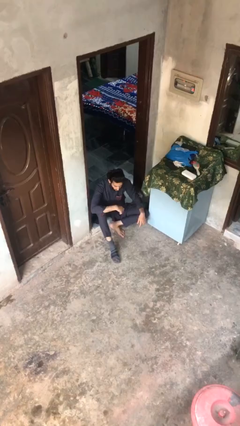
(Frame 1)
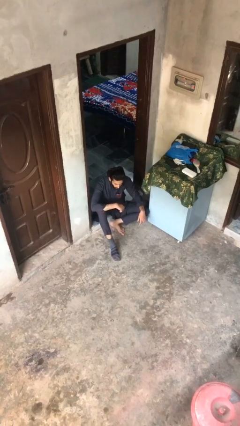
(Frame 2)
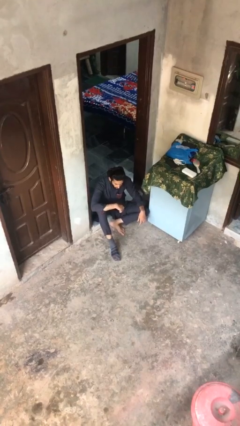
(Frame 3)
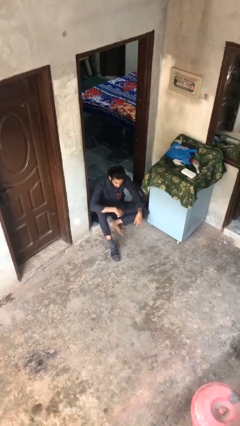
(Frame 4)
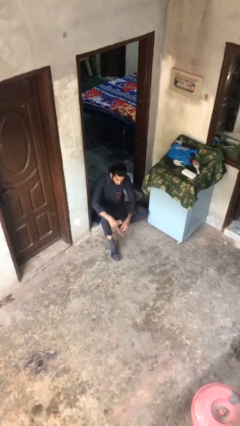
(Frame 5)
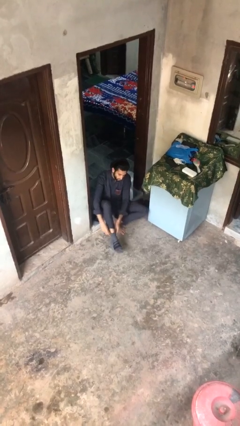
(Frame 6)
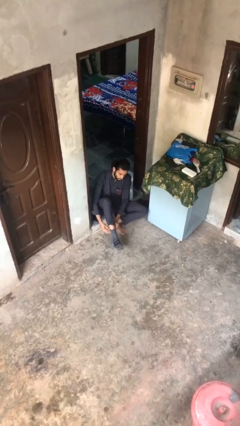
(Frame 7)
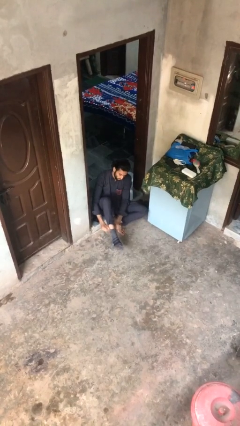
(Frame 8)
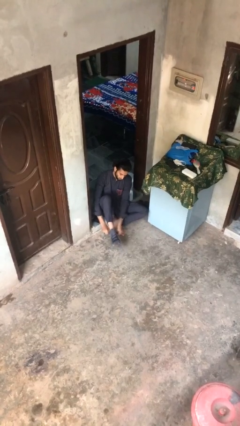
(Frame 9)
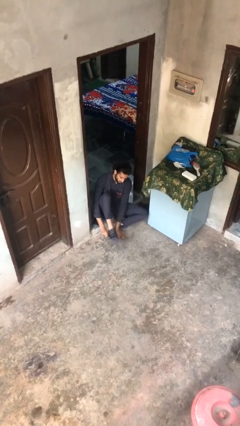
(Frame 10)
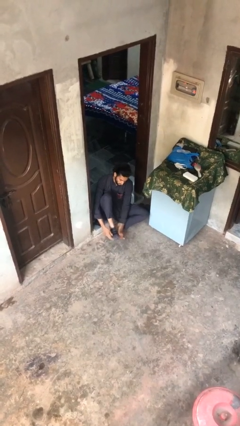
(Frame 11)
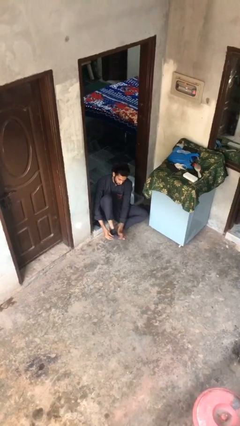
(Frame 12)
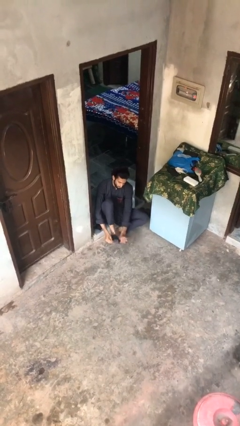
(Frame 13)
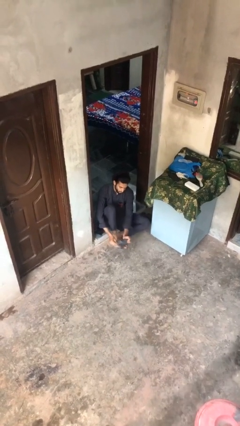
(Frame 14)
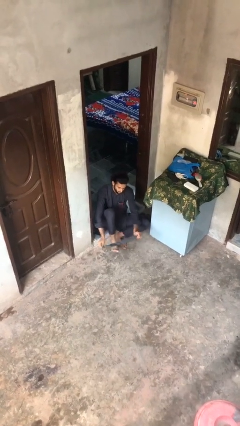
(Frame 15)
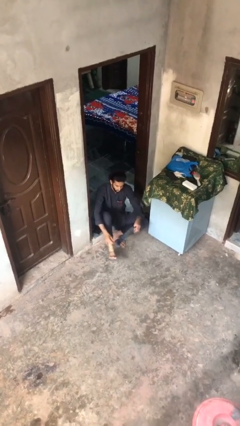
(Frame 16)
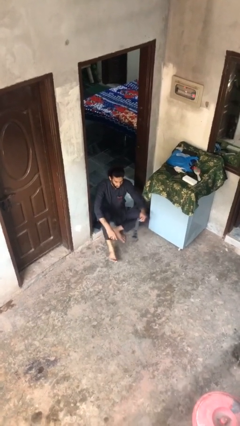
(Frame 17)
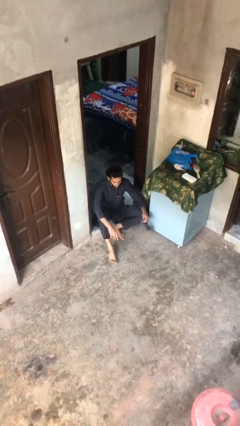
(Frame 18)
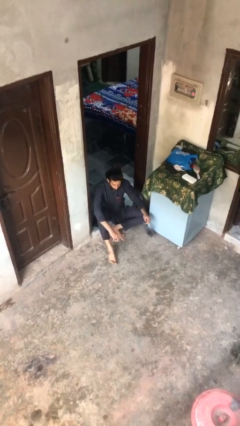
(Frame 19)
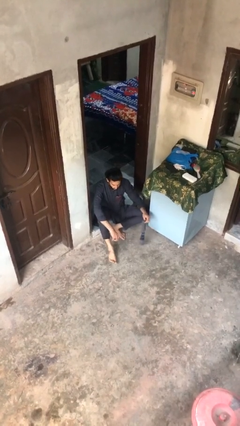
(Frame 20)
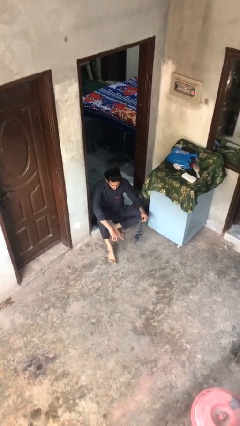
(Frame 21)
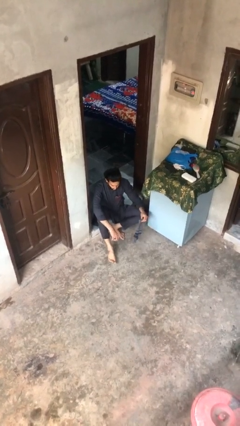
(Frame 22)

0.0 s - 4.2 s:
person takes off socks

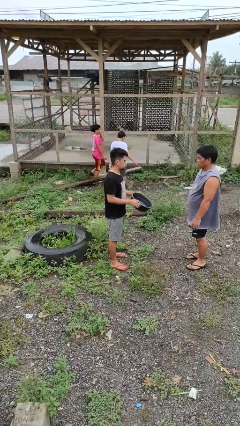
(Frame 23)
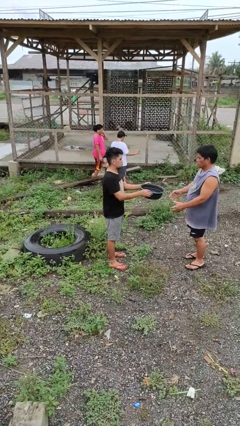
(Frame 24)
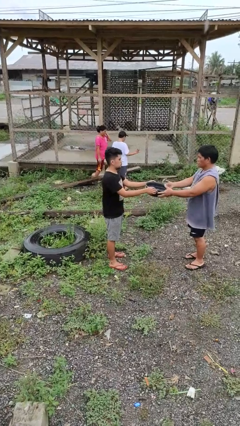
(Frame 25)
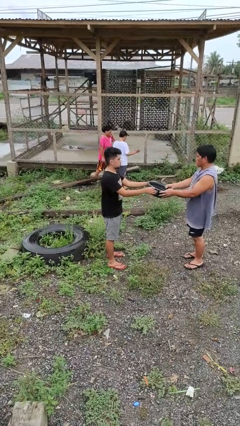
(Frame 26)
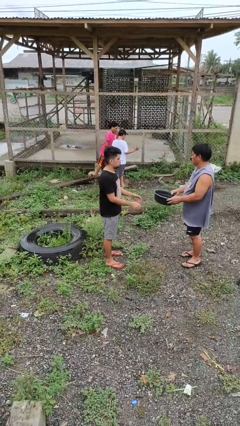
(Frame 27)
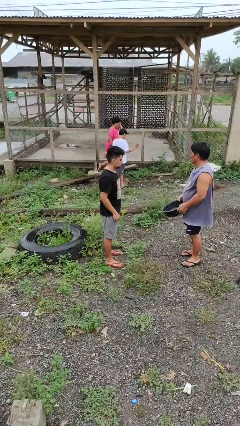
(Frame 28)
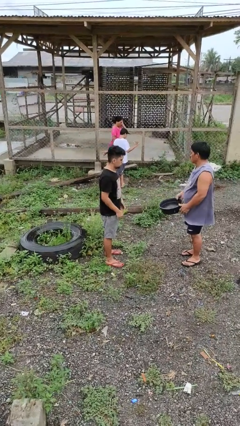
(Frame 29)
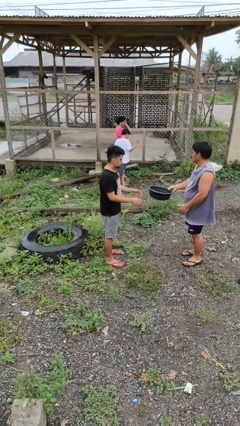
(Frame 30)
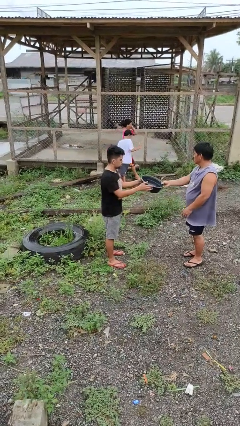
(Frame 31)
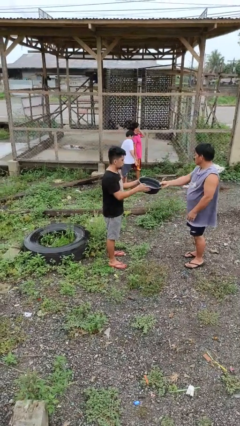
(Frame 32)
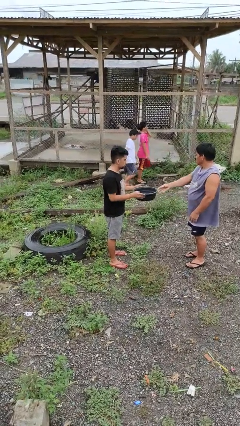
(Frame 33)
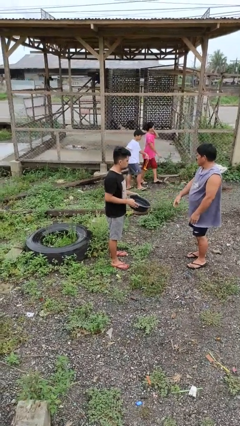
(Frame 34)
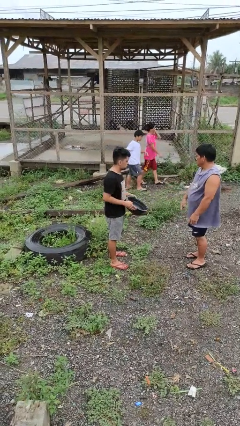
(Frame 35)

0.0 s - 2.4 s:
person transfers object to person

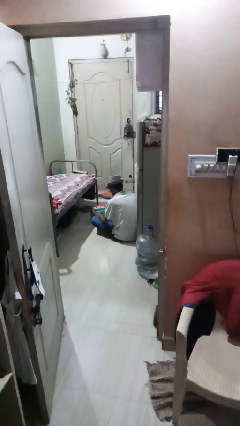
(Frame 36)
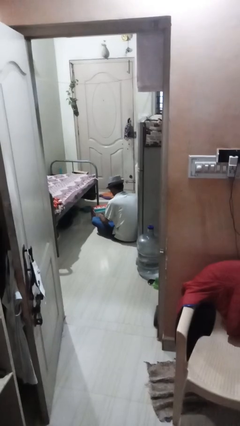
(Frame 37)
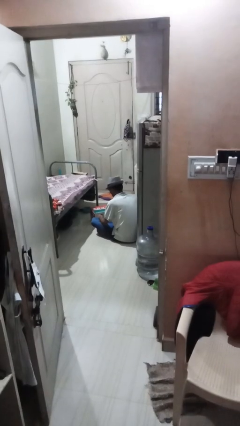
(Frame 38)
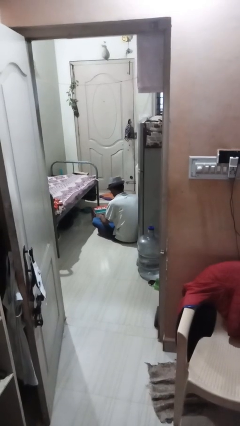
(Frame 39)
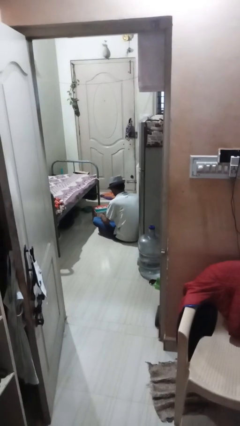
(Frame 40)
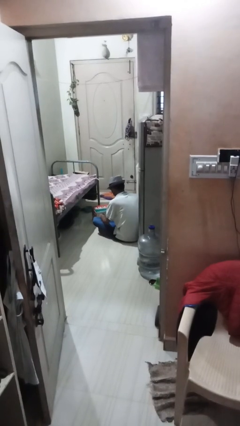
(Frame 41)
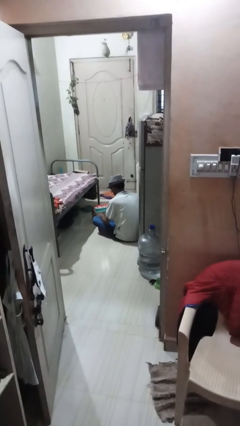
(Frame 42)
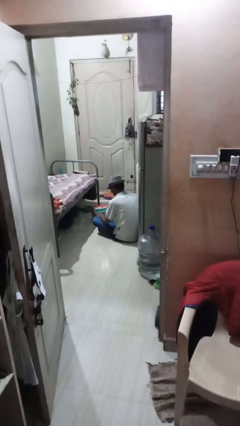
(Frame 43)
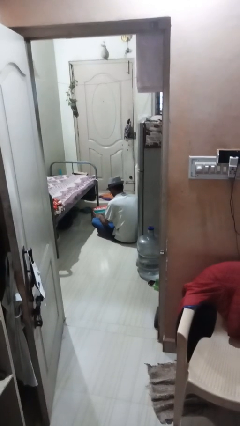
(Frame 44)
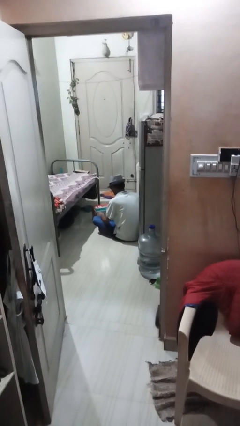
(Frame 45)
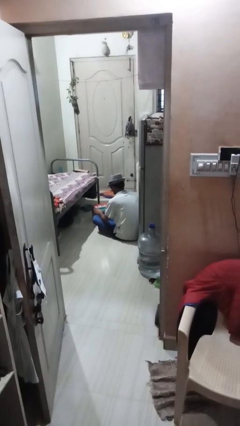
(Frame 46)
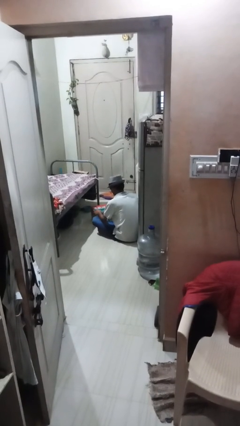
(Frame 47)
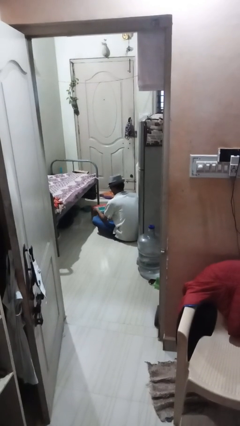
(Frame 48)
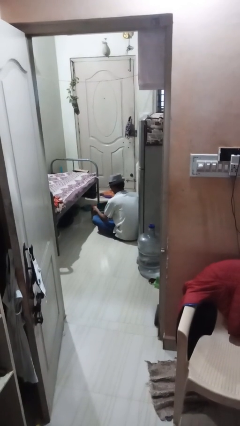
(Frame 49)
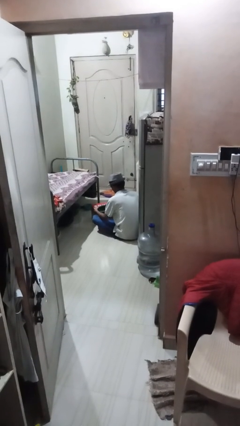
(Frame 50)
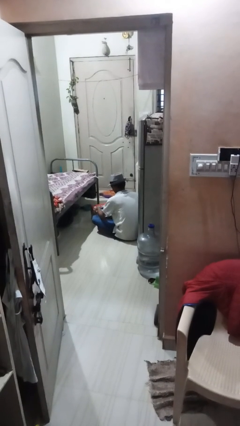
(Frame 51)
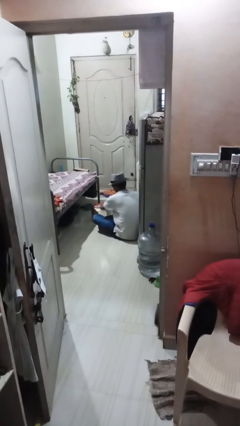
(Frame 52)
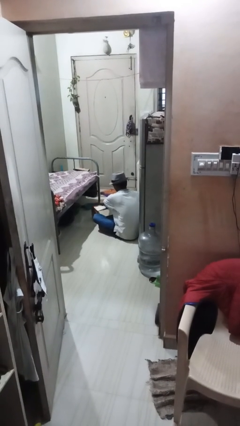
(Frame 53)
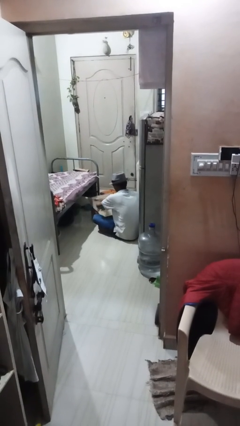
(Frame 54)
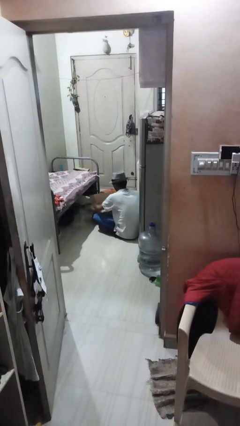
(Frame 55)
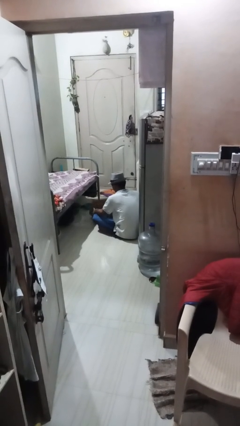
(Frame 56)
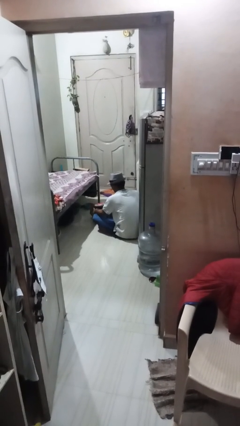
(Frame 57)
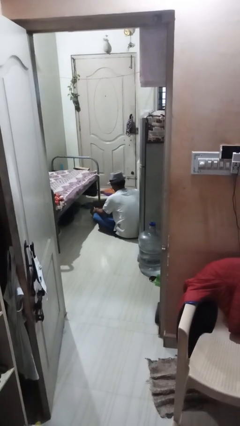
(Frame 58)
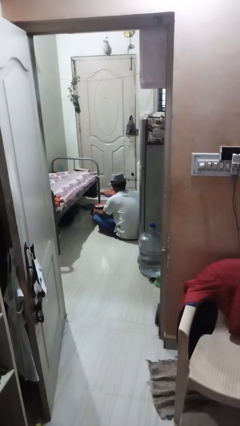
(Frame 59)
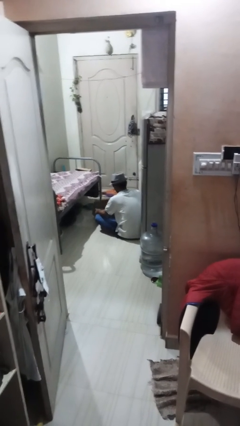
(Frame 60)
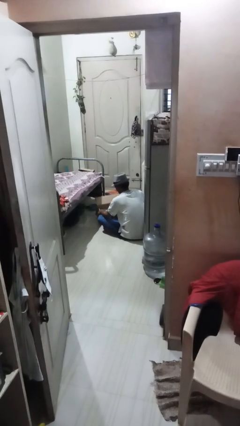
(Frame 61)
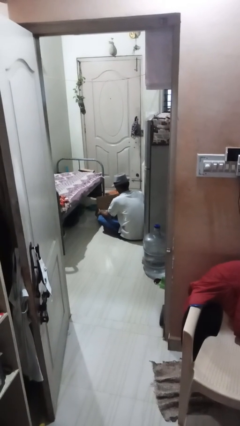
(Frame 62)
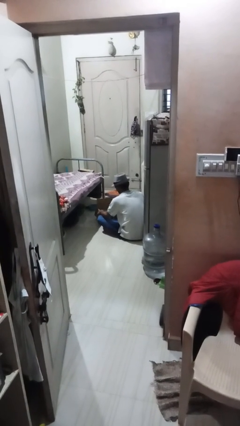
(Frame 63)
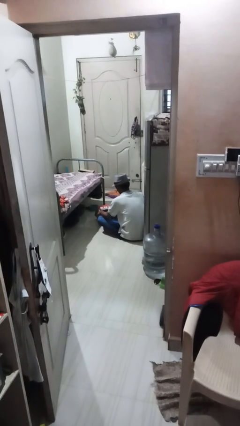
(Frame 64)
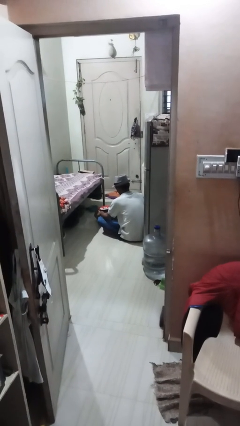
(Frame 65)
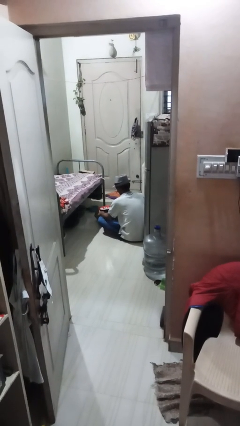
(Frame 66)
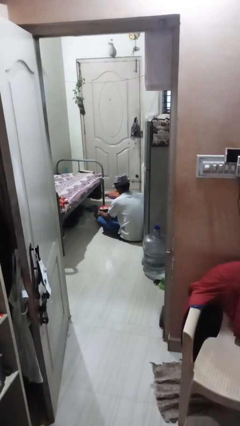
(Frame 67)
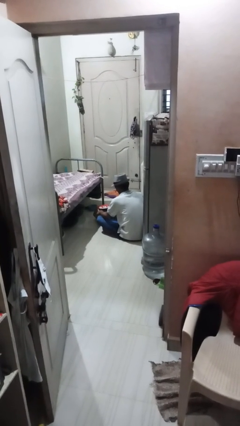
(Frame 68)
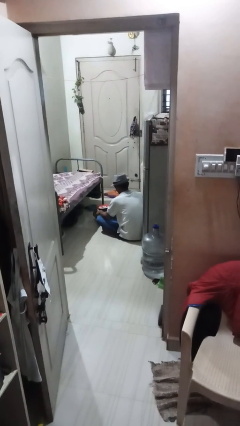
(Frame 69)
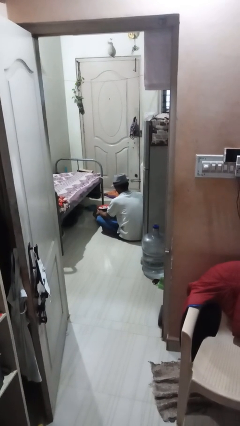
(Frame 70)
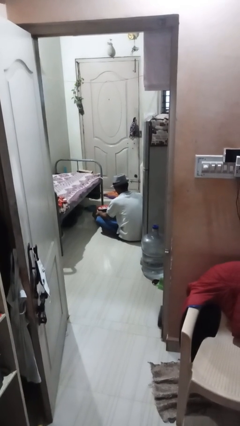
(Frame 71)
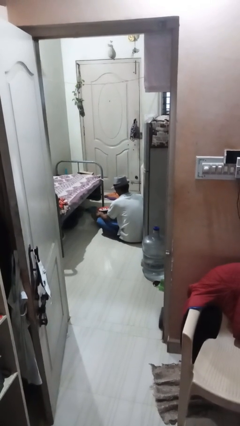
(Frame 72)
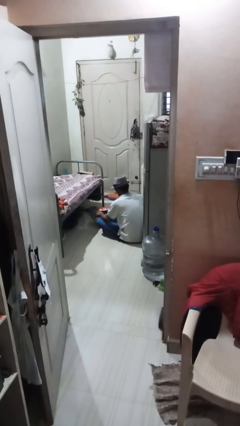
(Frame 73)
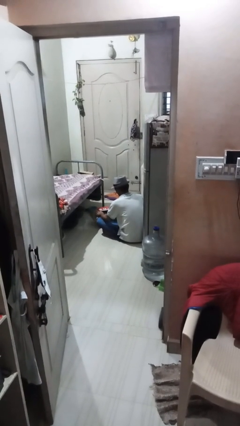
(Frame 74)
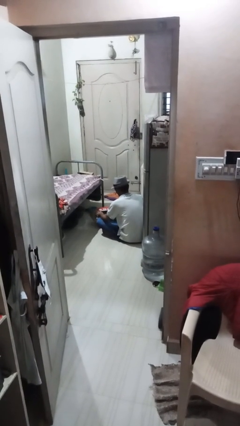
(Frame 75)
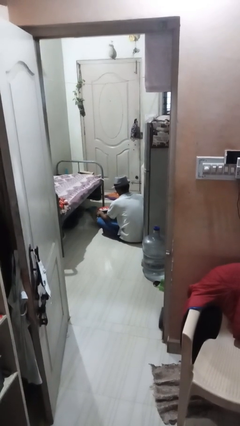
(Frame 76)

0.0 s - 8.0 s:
person opens box

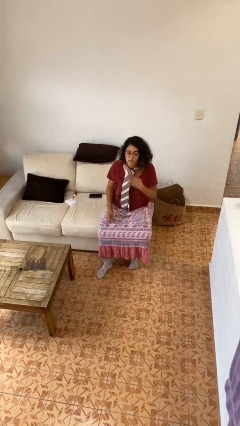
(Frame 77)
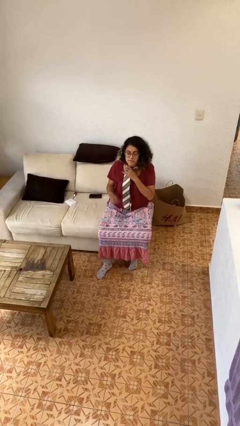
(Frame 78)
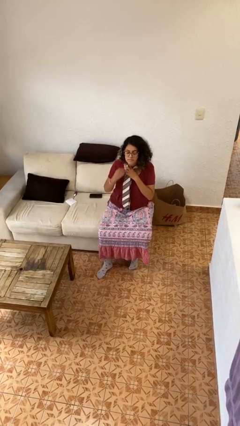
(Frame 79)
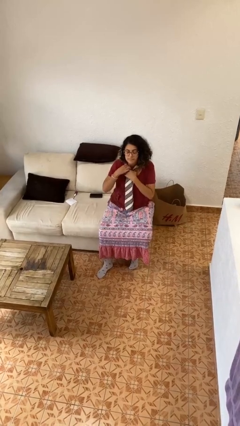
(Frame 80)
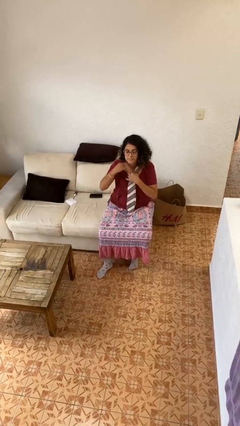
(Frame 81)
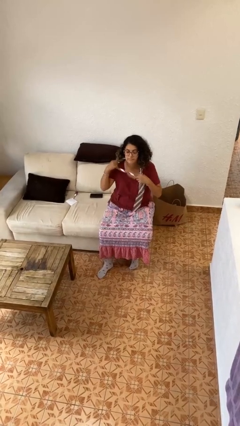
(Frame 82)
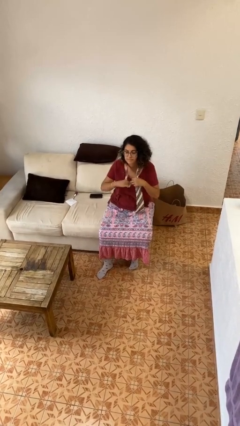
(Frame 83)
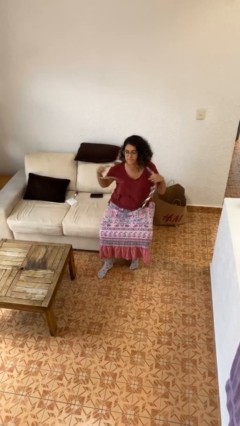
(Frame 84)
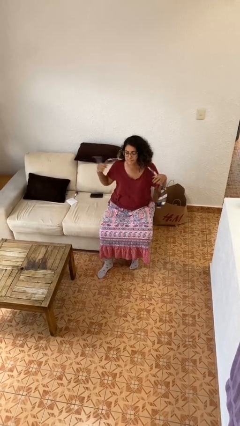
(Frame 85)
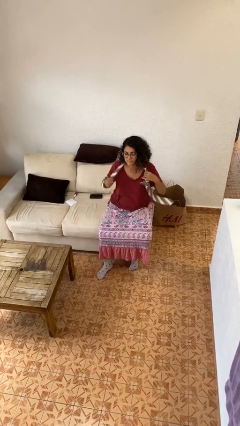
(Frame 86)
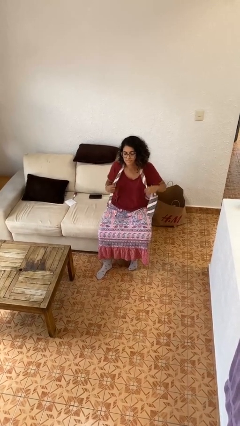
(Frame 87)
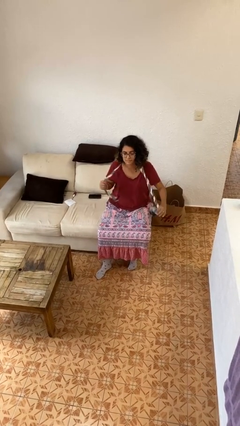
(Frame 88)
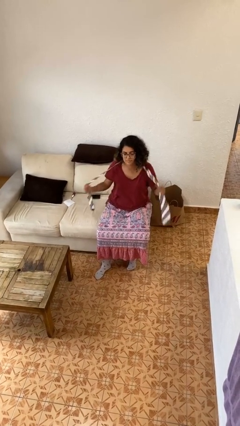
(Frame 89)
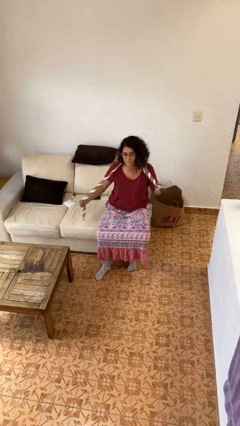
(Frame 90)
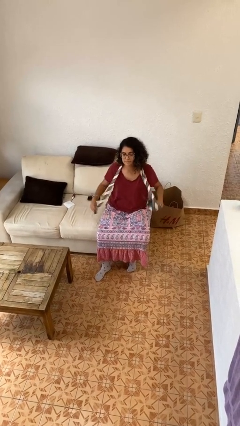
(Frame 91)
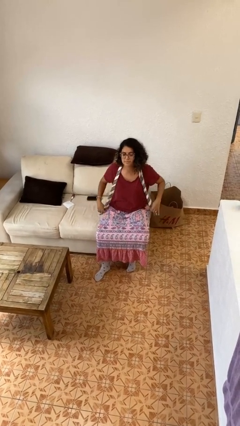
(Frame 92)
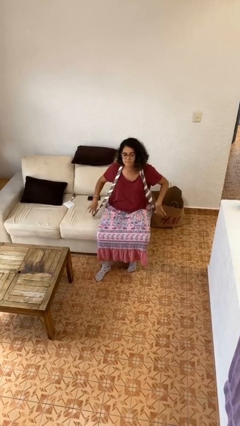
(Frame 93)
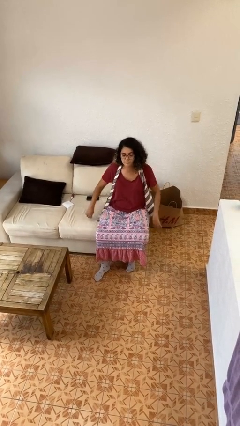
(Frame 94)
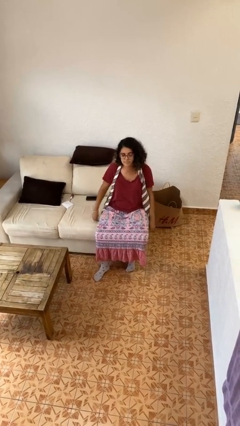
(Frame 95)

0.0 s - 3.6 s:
person takes off necktie
